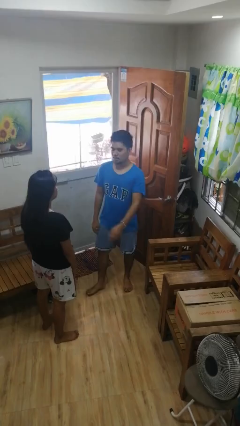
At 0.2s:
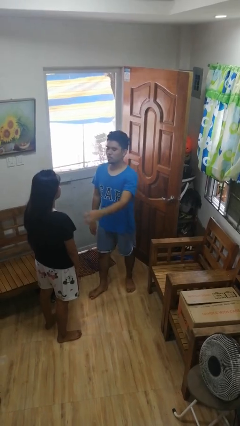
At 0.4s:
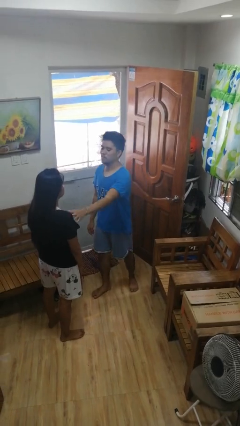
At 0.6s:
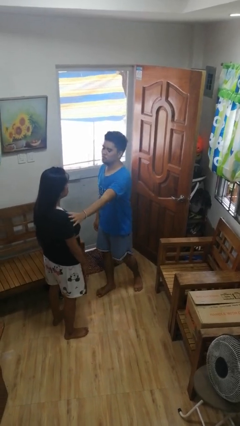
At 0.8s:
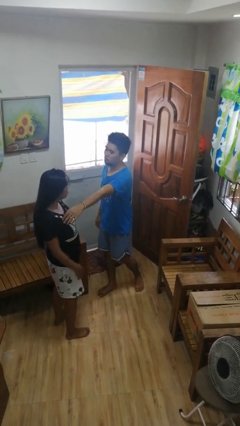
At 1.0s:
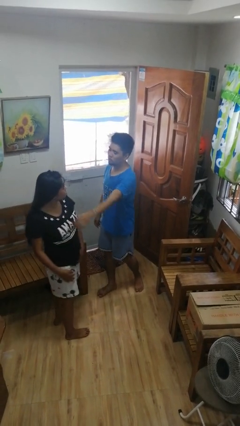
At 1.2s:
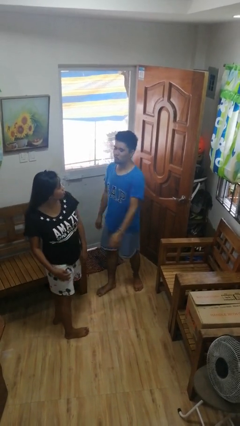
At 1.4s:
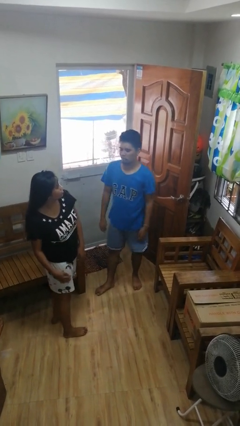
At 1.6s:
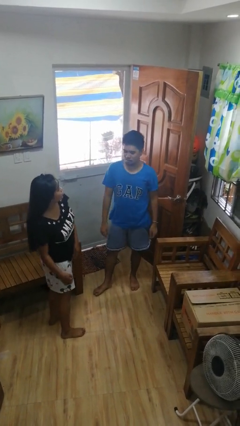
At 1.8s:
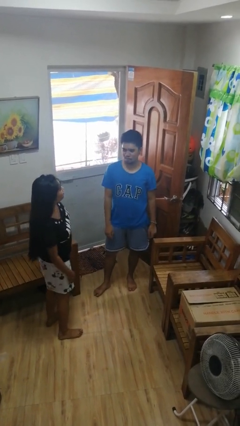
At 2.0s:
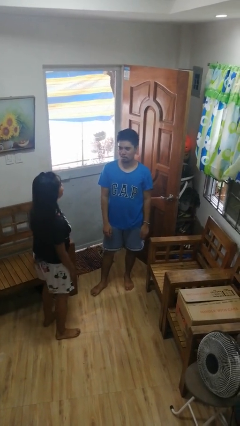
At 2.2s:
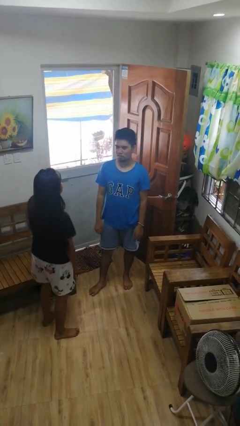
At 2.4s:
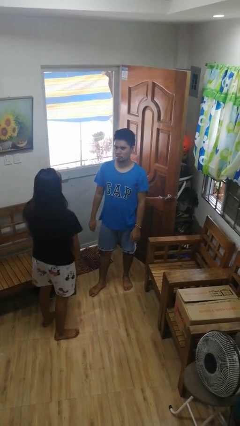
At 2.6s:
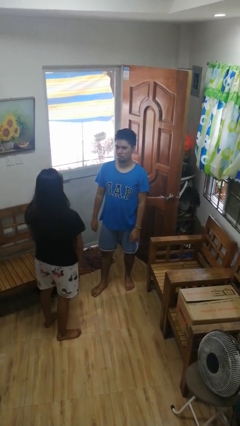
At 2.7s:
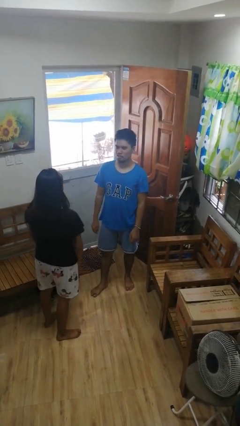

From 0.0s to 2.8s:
person shoves person

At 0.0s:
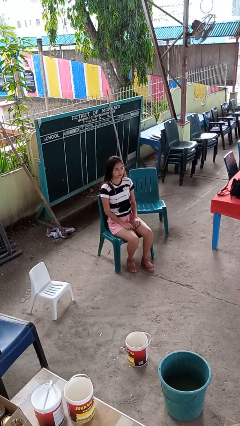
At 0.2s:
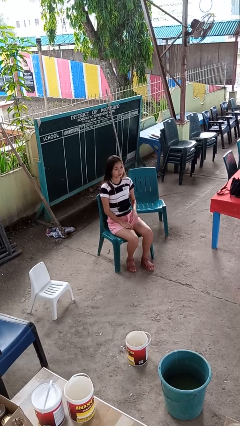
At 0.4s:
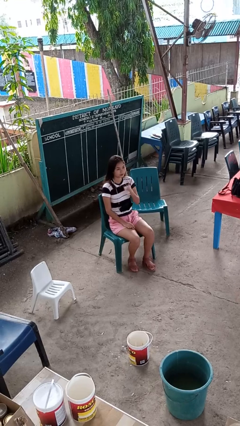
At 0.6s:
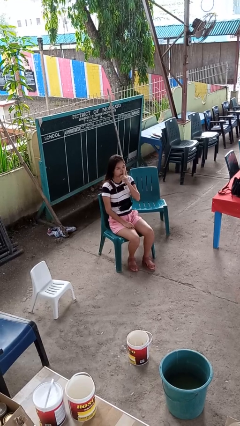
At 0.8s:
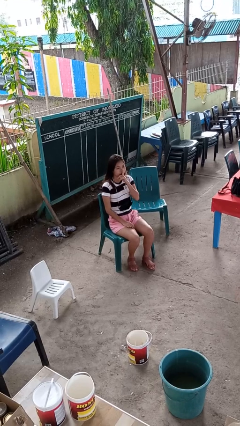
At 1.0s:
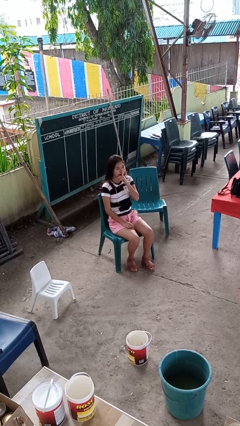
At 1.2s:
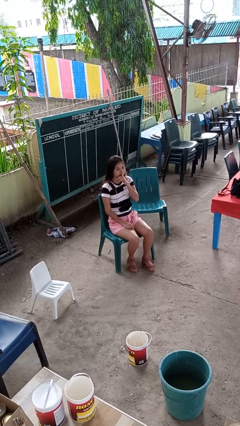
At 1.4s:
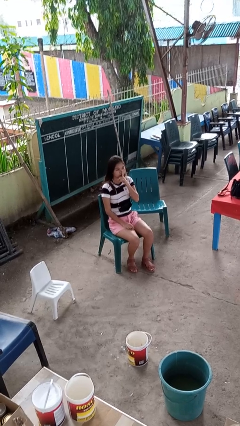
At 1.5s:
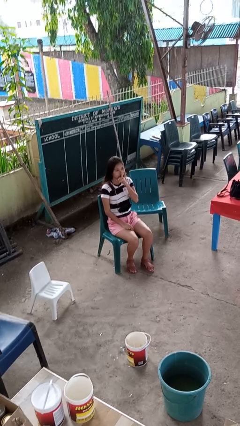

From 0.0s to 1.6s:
person gestures be quiet

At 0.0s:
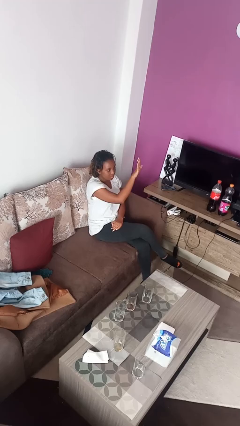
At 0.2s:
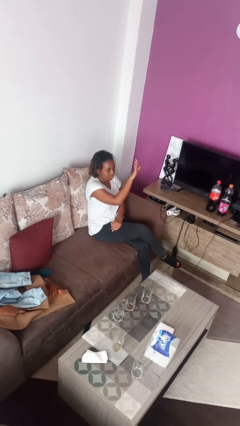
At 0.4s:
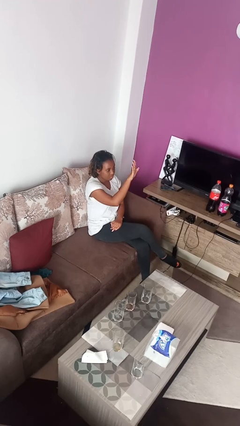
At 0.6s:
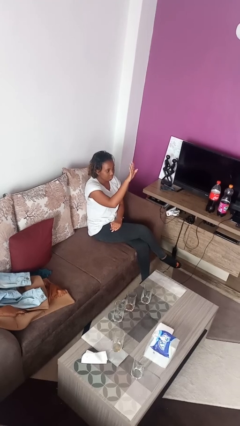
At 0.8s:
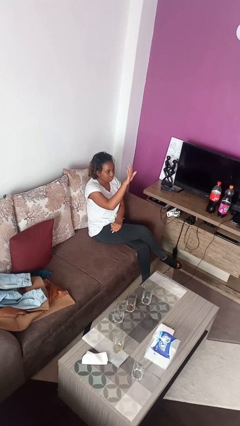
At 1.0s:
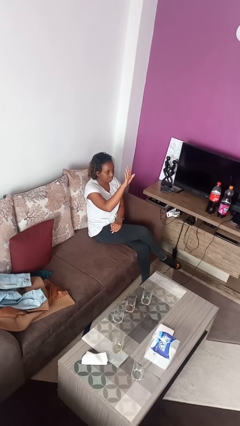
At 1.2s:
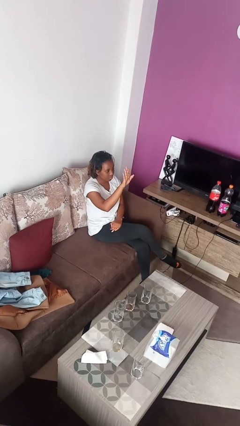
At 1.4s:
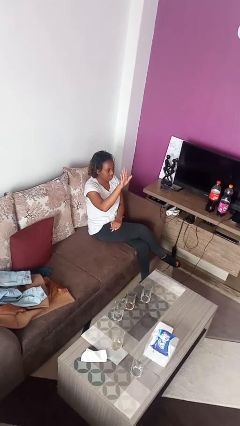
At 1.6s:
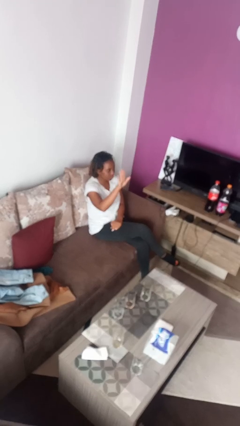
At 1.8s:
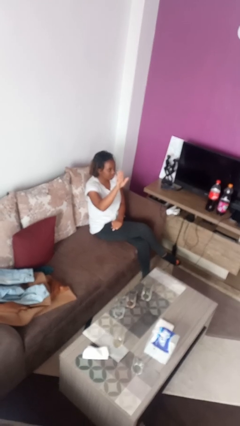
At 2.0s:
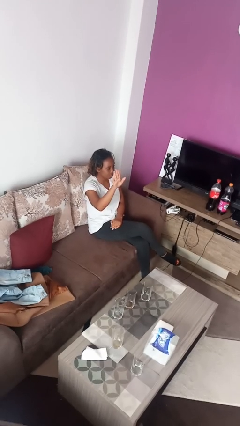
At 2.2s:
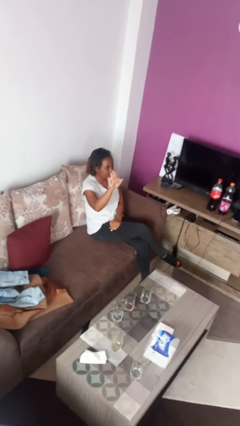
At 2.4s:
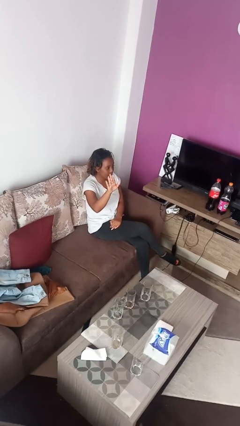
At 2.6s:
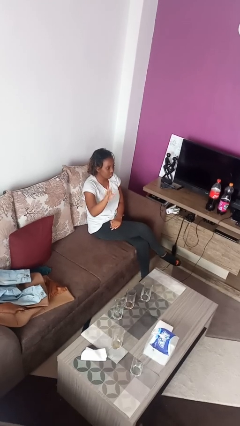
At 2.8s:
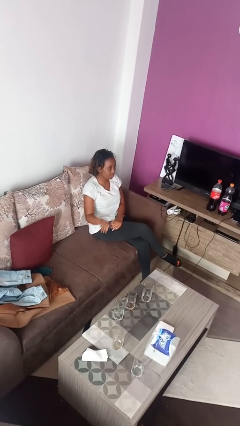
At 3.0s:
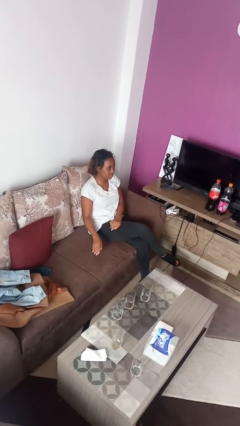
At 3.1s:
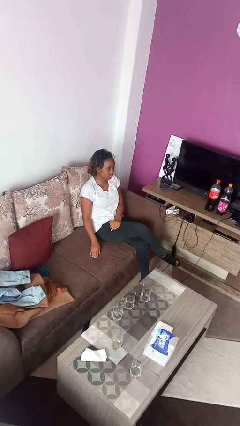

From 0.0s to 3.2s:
person gestures swipe right

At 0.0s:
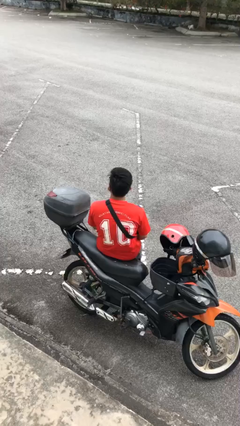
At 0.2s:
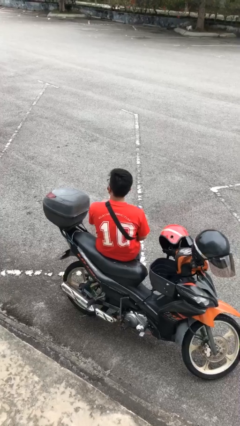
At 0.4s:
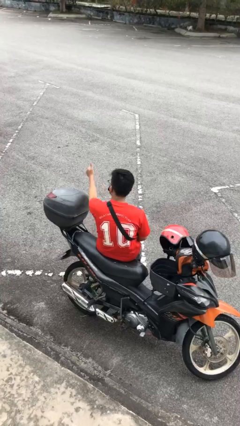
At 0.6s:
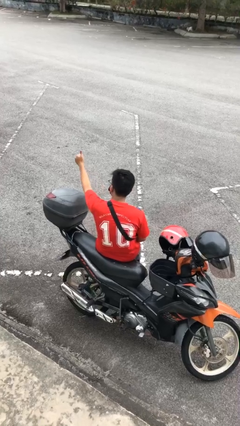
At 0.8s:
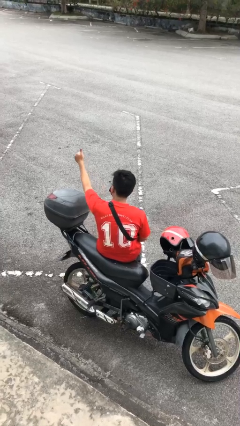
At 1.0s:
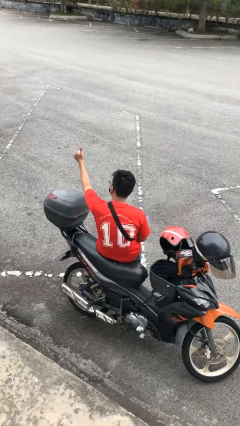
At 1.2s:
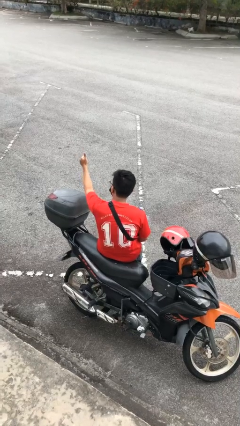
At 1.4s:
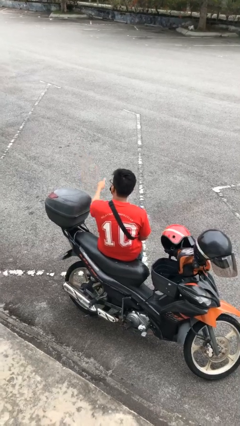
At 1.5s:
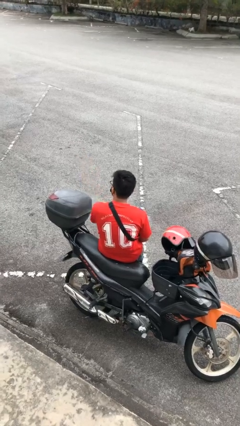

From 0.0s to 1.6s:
person gestures thumbs up

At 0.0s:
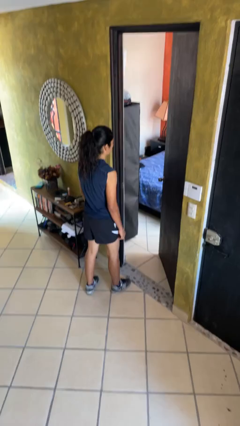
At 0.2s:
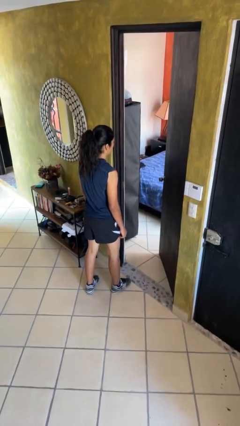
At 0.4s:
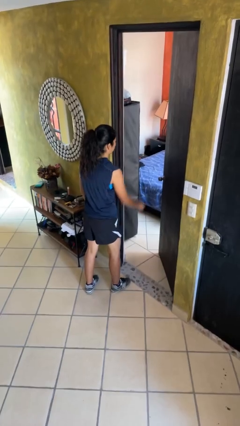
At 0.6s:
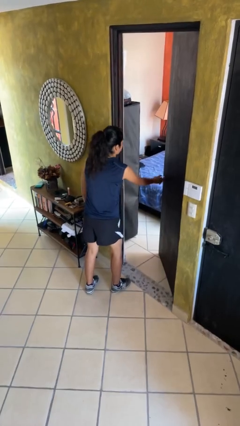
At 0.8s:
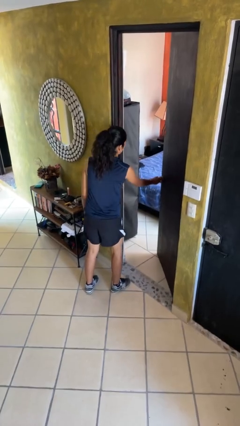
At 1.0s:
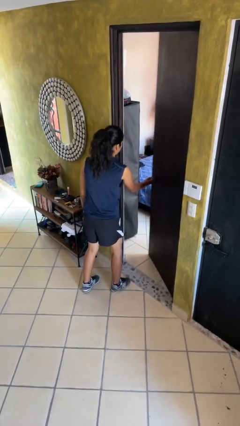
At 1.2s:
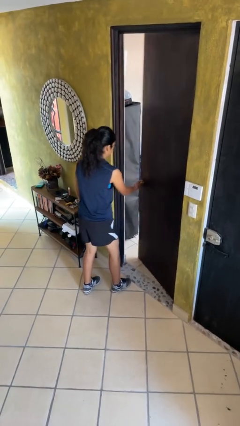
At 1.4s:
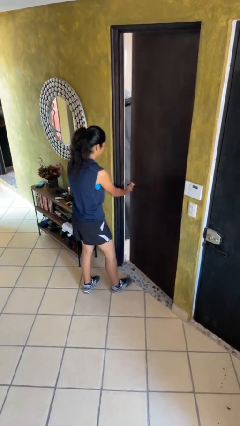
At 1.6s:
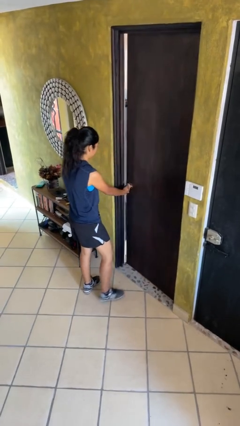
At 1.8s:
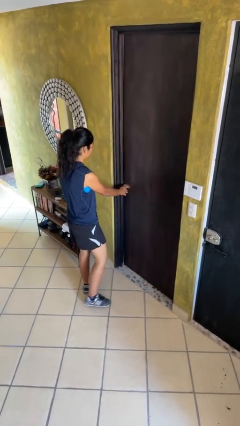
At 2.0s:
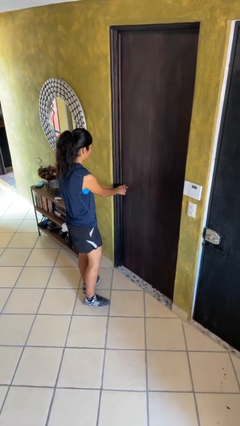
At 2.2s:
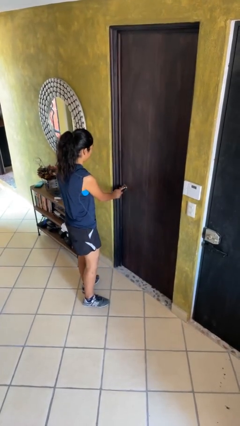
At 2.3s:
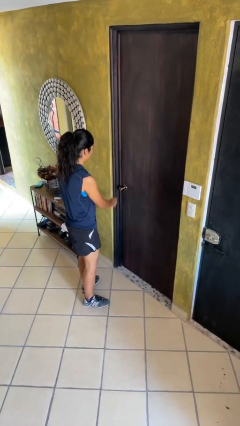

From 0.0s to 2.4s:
person closes facility door

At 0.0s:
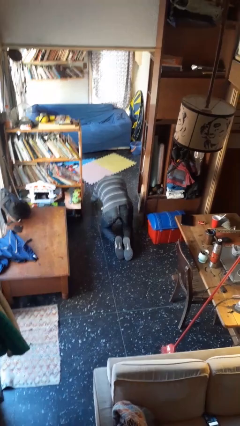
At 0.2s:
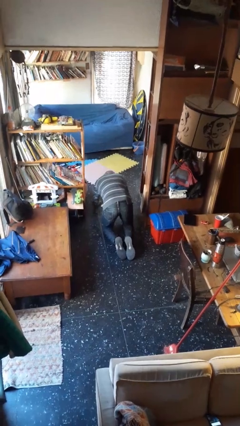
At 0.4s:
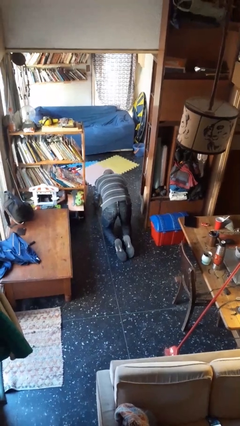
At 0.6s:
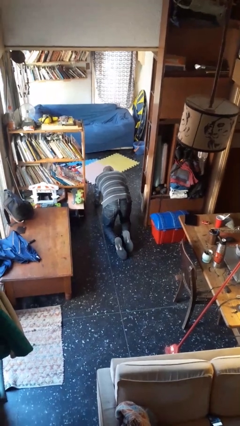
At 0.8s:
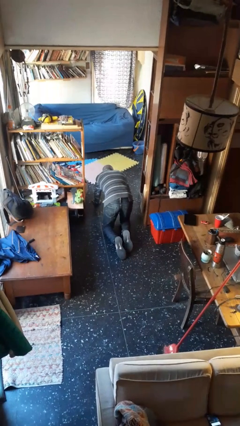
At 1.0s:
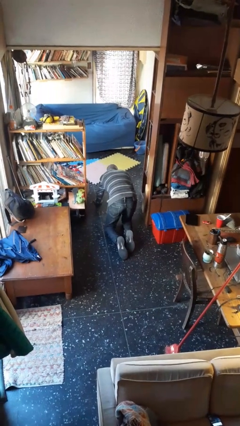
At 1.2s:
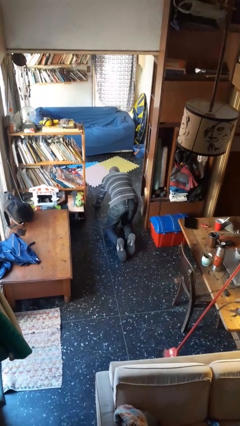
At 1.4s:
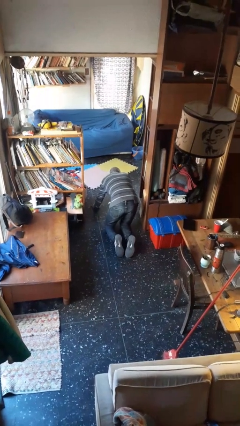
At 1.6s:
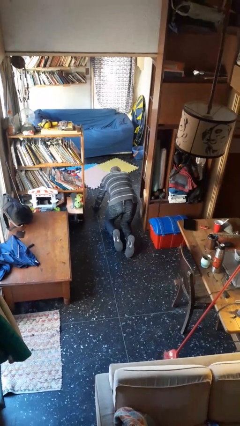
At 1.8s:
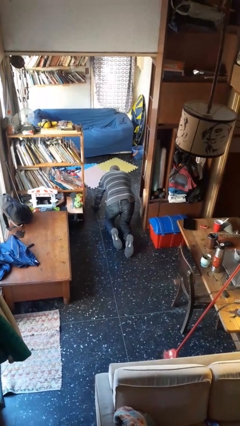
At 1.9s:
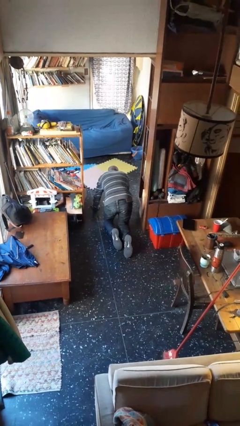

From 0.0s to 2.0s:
person crawls

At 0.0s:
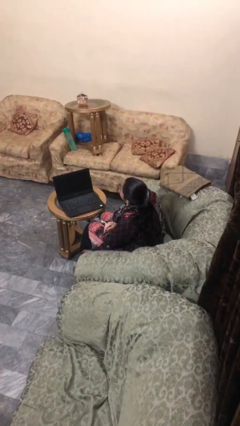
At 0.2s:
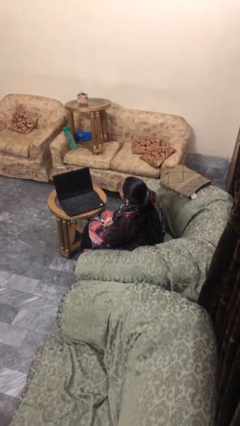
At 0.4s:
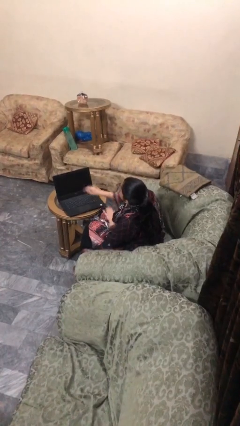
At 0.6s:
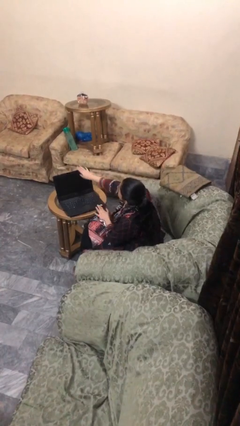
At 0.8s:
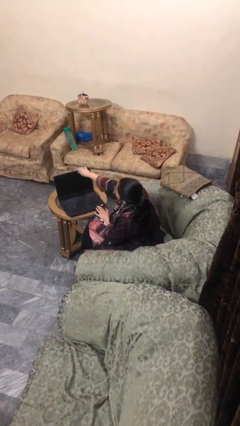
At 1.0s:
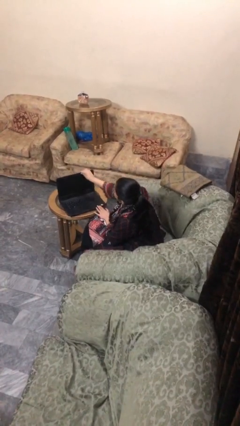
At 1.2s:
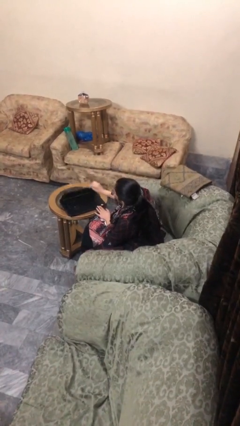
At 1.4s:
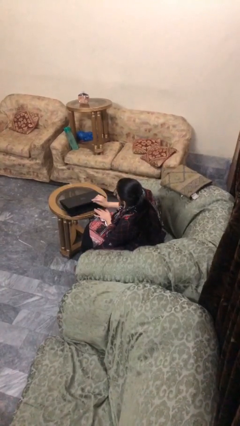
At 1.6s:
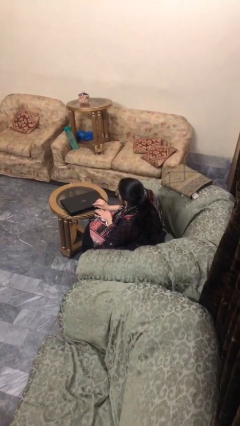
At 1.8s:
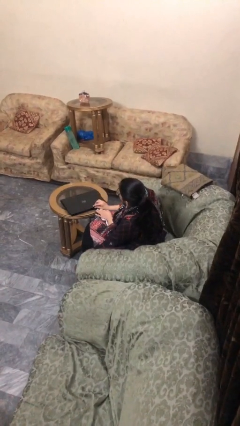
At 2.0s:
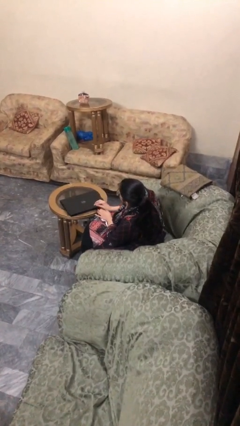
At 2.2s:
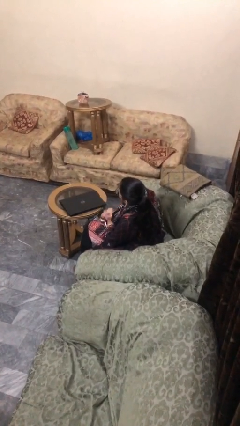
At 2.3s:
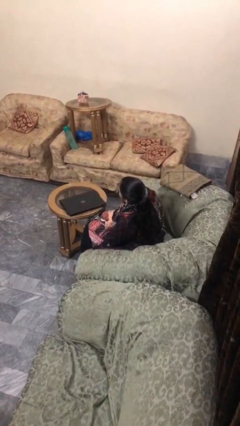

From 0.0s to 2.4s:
person closes laptop

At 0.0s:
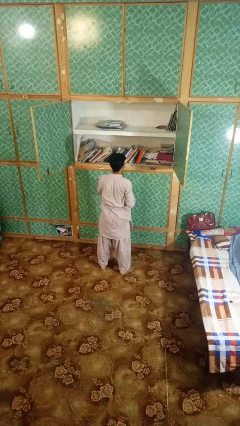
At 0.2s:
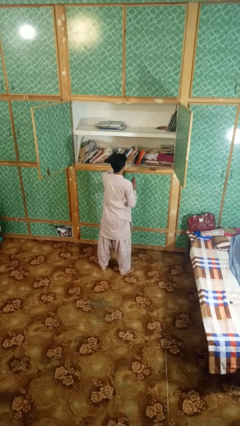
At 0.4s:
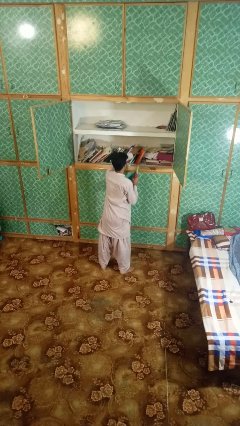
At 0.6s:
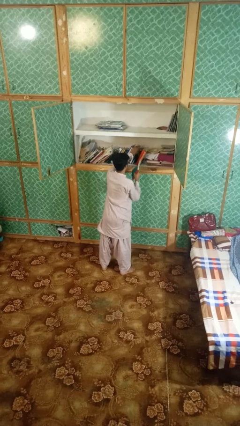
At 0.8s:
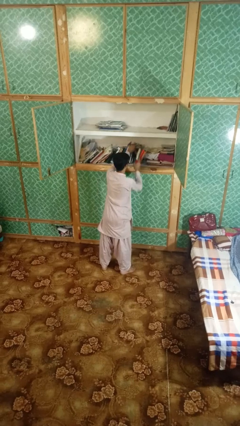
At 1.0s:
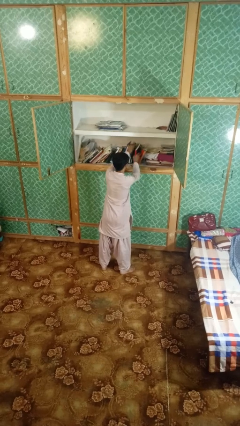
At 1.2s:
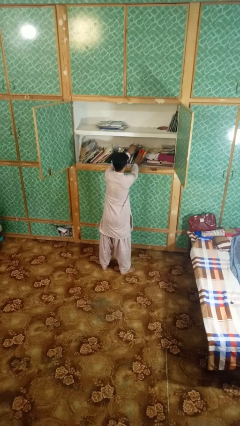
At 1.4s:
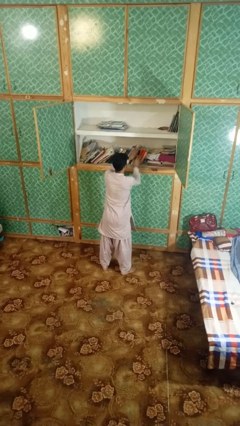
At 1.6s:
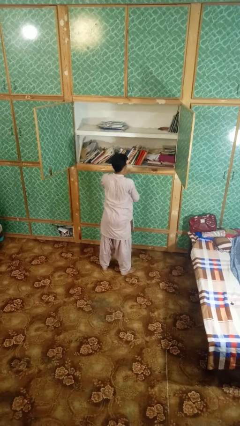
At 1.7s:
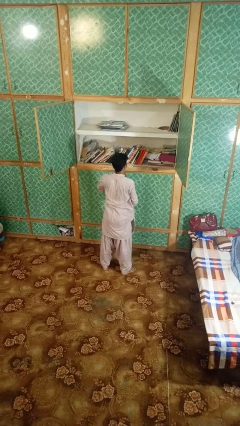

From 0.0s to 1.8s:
person puts down object on shelf
